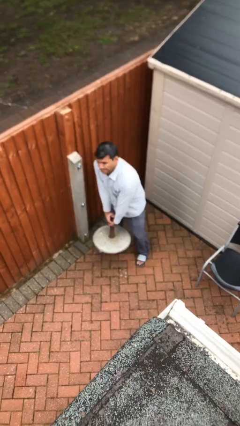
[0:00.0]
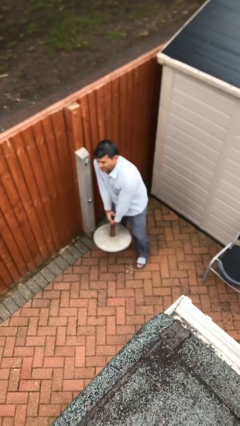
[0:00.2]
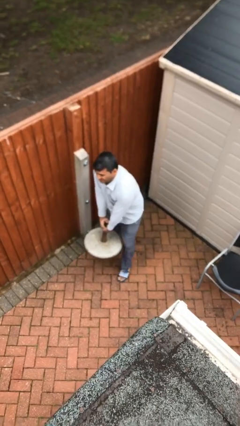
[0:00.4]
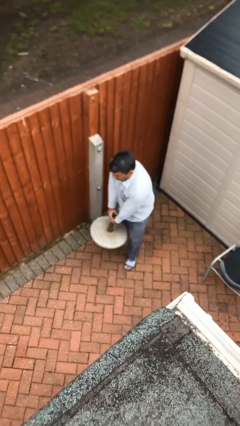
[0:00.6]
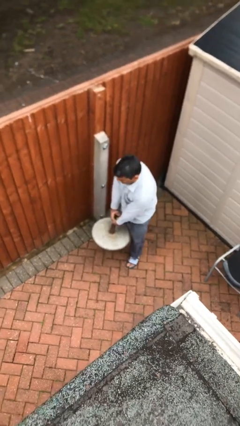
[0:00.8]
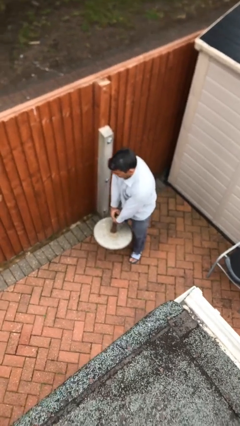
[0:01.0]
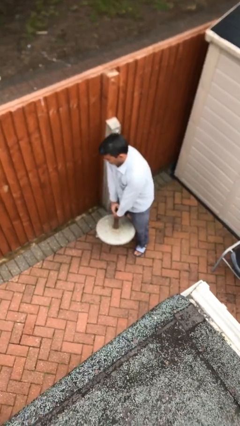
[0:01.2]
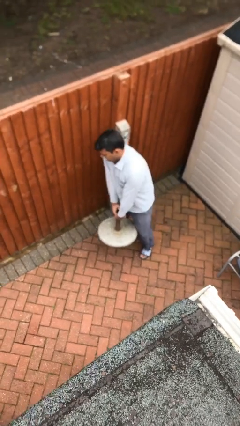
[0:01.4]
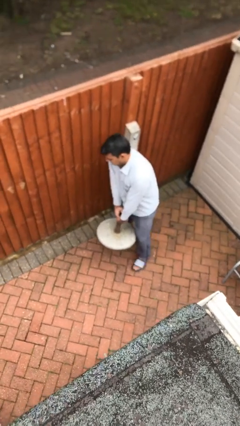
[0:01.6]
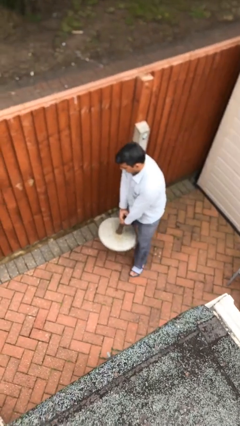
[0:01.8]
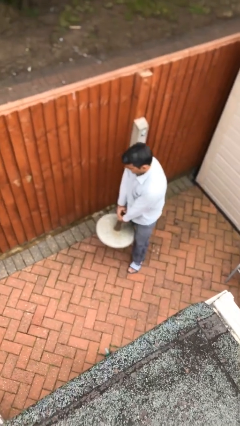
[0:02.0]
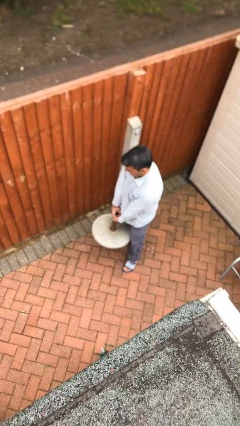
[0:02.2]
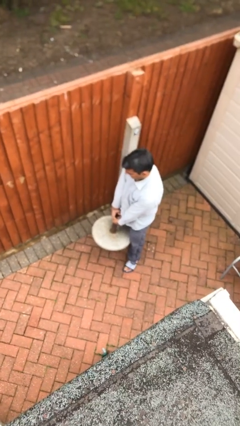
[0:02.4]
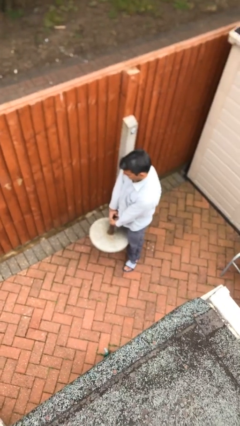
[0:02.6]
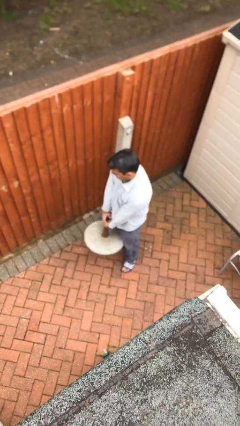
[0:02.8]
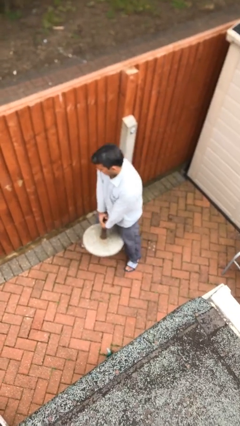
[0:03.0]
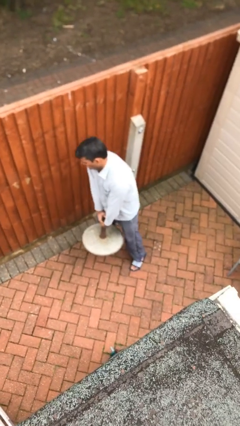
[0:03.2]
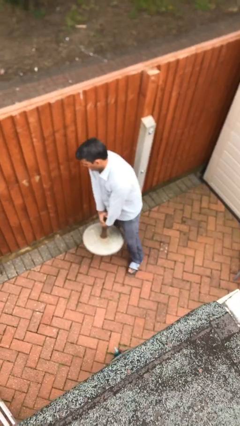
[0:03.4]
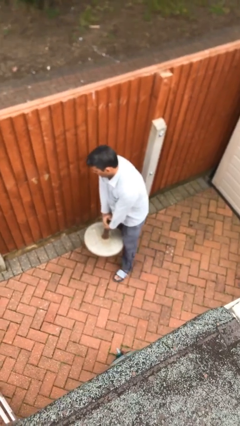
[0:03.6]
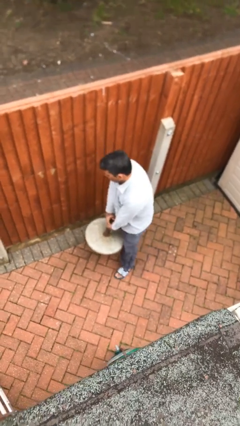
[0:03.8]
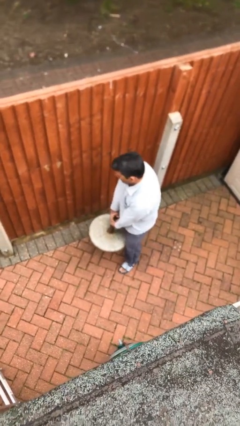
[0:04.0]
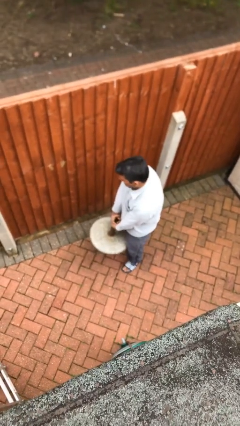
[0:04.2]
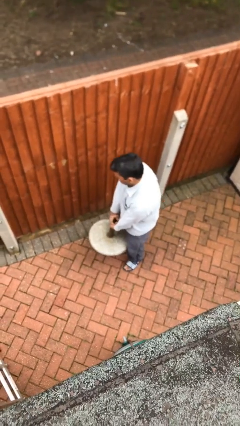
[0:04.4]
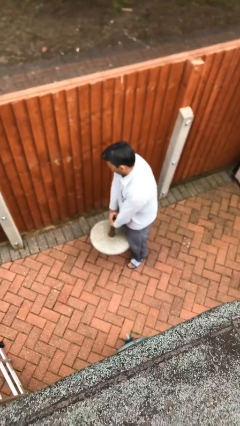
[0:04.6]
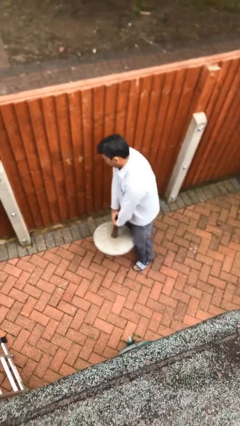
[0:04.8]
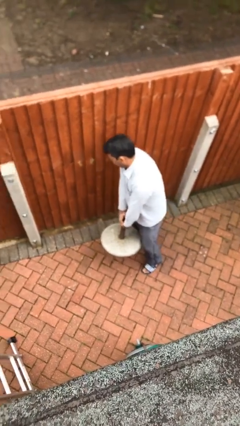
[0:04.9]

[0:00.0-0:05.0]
person carries heavy object

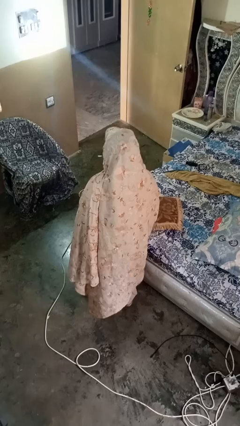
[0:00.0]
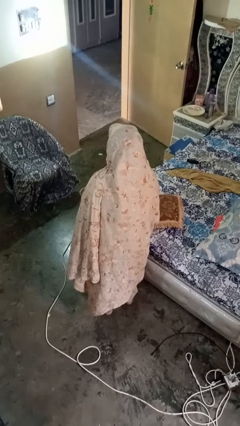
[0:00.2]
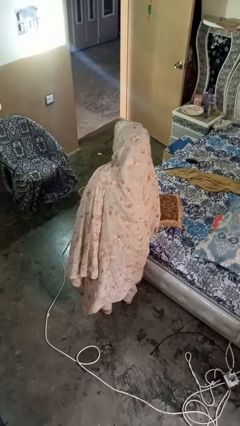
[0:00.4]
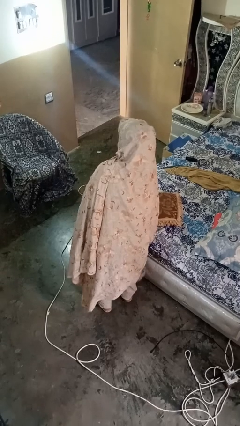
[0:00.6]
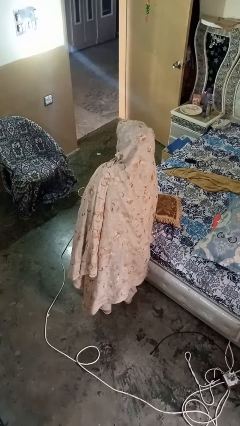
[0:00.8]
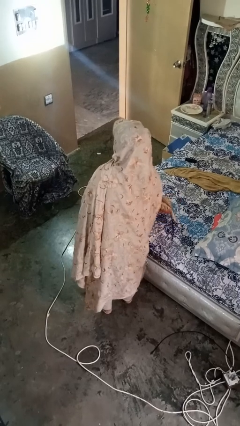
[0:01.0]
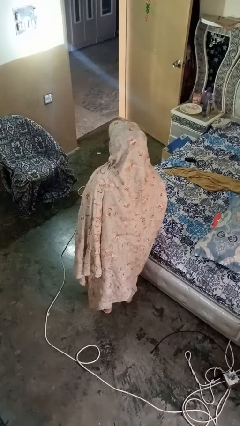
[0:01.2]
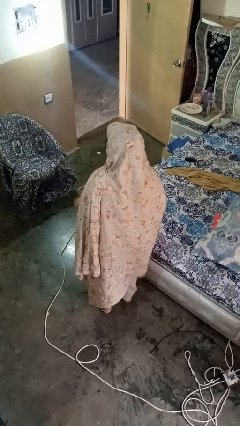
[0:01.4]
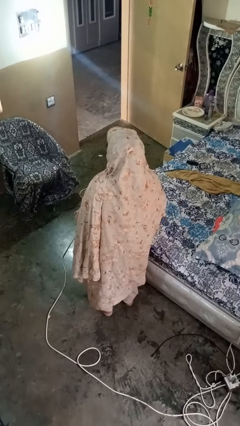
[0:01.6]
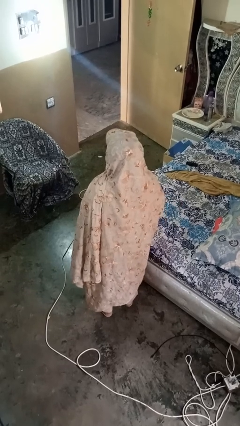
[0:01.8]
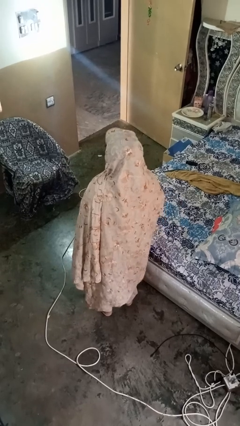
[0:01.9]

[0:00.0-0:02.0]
person picks up object from bed

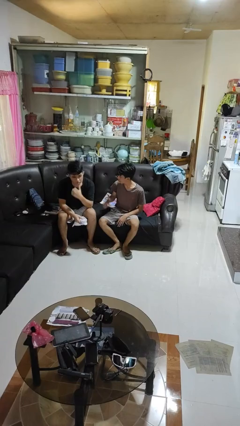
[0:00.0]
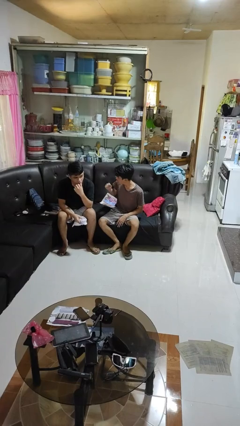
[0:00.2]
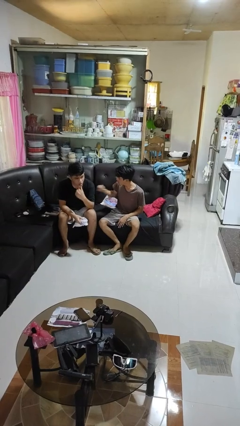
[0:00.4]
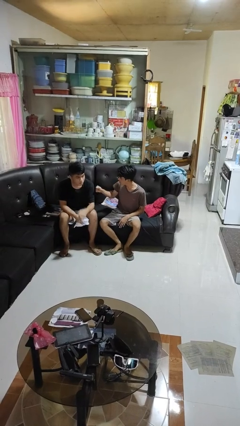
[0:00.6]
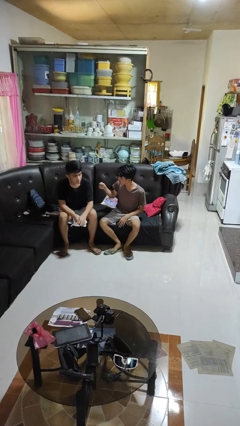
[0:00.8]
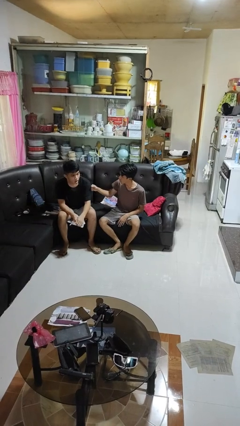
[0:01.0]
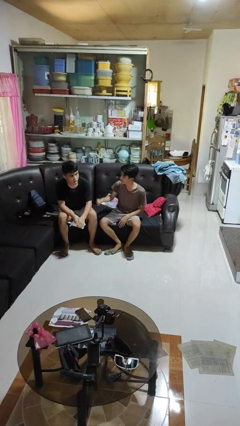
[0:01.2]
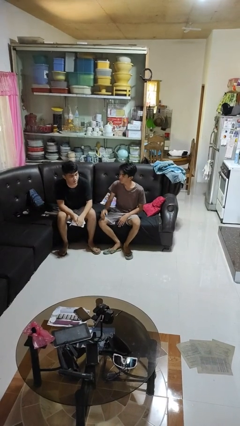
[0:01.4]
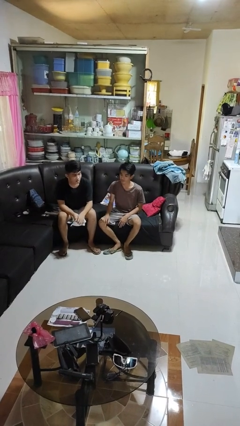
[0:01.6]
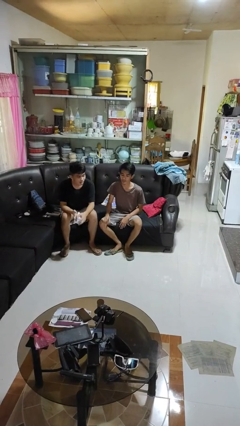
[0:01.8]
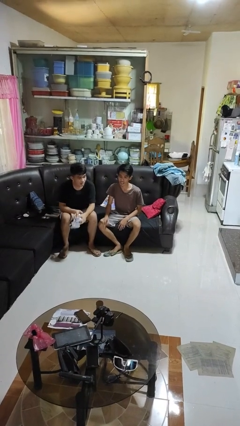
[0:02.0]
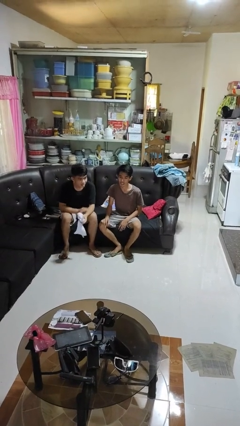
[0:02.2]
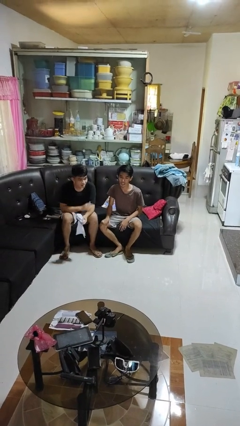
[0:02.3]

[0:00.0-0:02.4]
person pounds shoulders of person

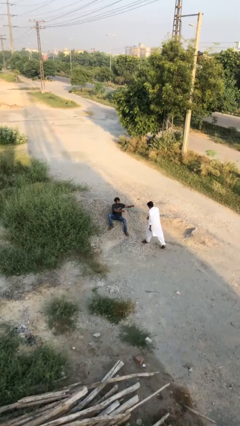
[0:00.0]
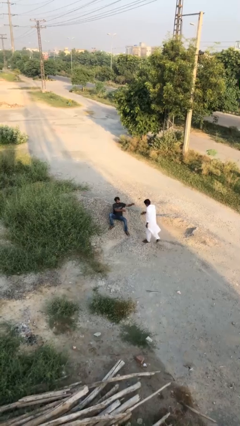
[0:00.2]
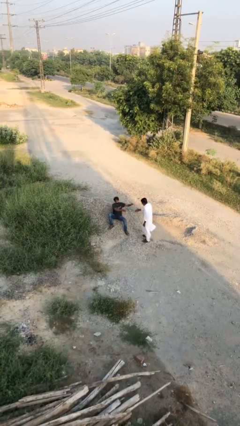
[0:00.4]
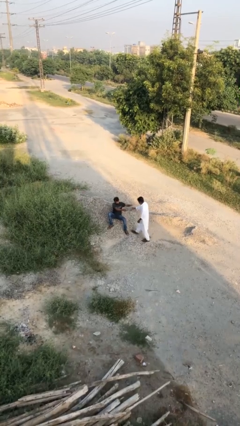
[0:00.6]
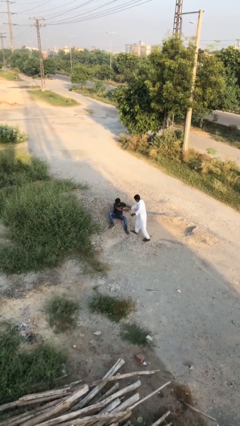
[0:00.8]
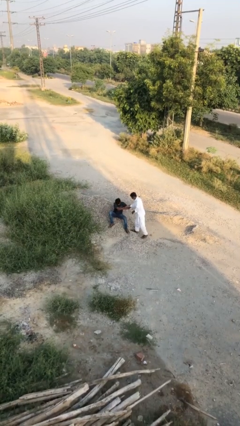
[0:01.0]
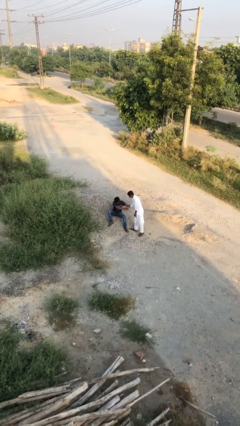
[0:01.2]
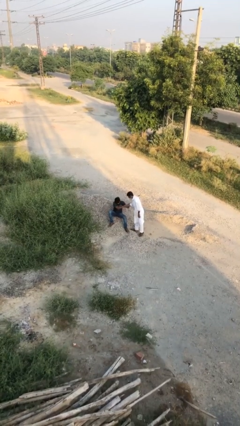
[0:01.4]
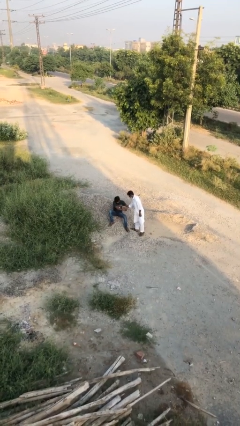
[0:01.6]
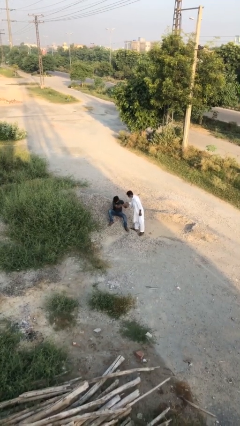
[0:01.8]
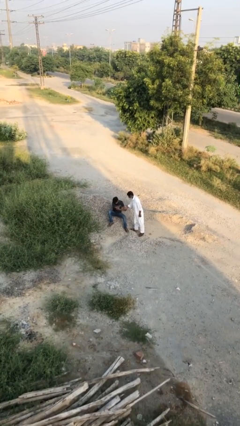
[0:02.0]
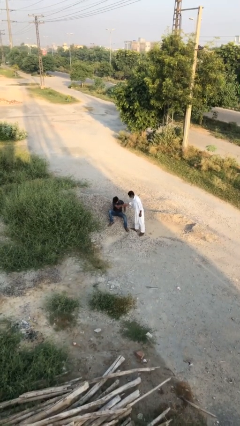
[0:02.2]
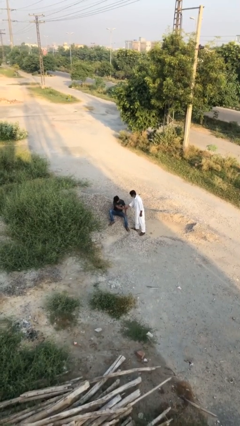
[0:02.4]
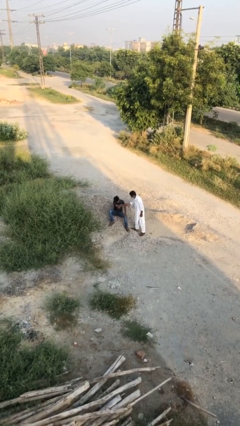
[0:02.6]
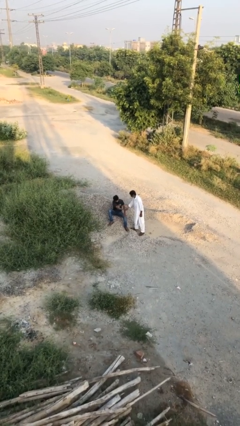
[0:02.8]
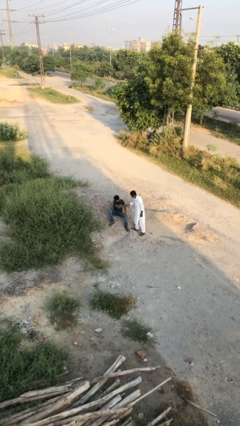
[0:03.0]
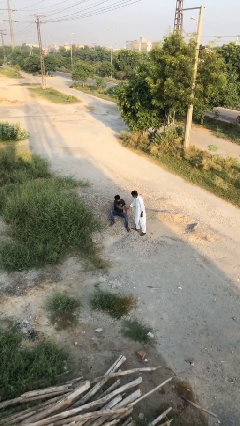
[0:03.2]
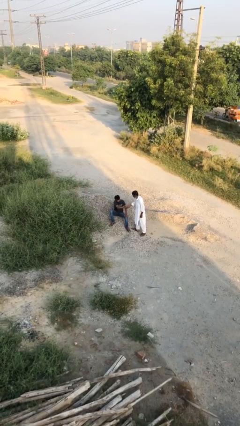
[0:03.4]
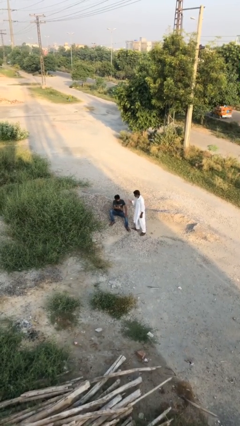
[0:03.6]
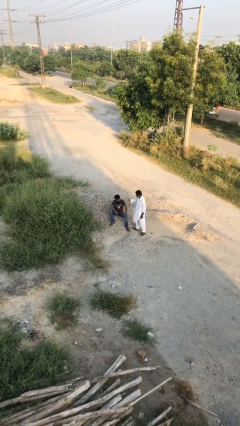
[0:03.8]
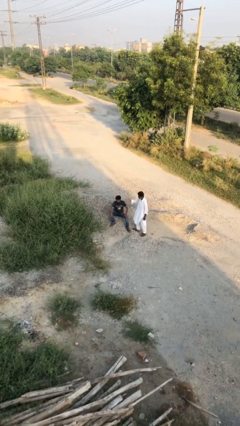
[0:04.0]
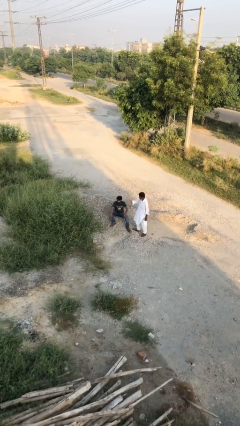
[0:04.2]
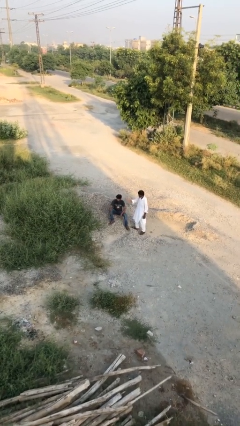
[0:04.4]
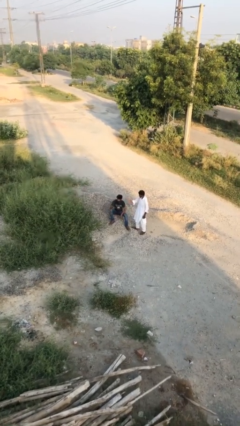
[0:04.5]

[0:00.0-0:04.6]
person shakes hand

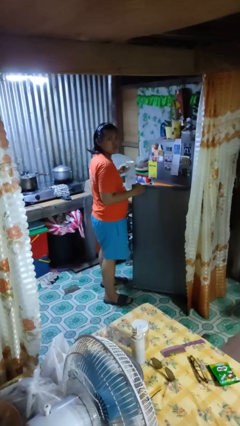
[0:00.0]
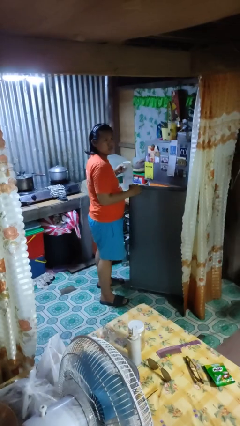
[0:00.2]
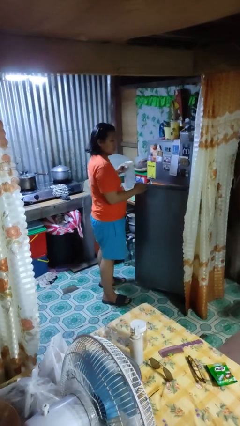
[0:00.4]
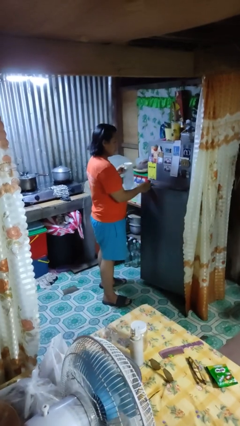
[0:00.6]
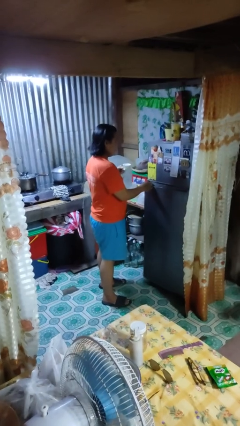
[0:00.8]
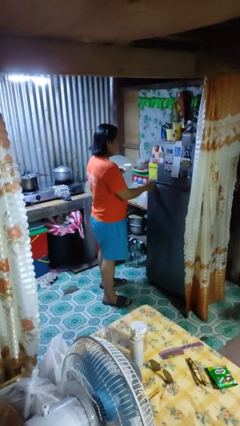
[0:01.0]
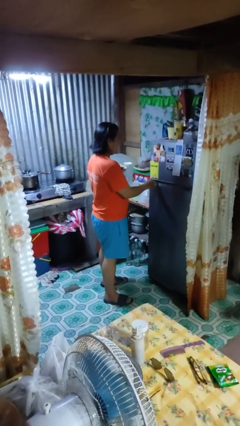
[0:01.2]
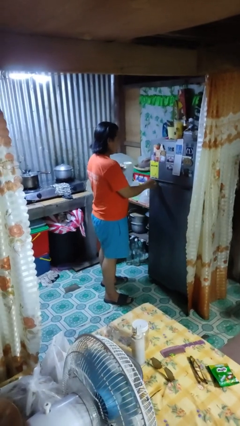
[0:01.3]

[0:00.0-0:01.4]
person closes refrigerator

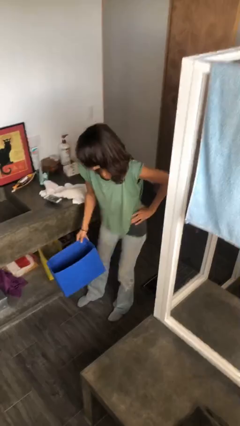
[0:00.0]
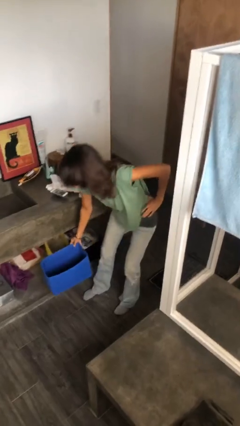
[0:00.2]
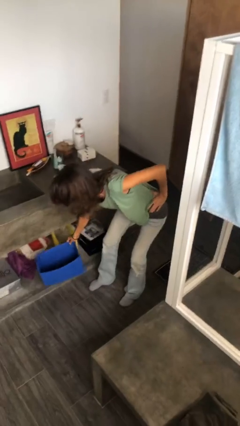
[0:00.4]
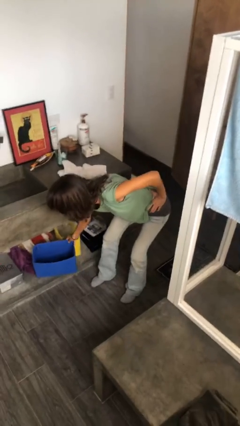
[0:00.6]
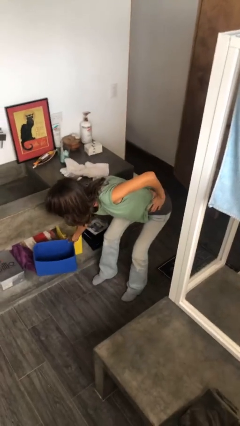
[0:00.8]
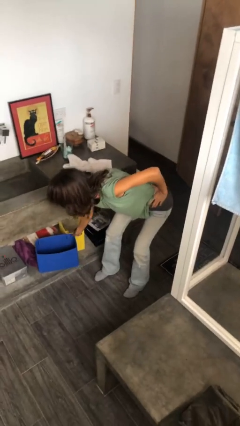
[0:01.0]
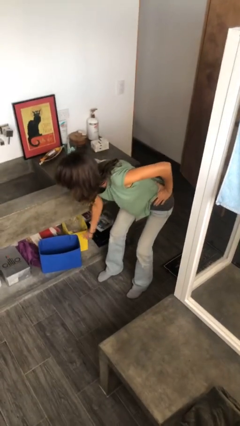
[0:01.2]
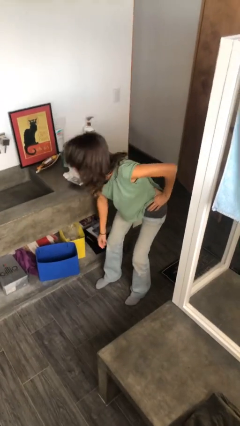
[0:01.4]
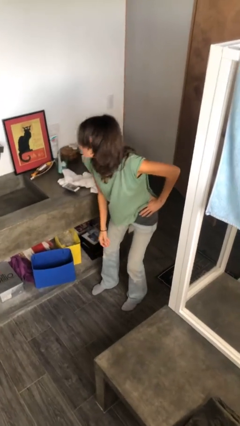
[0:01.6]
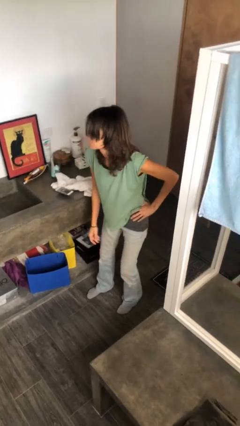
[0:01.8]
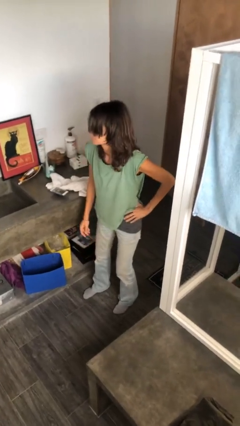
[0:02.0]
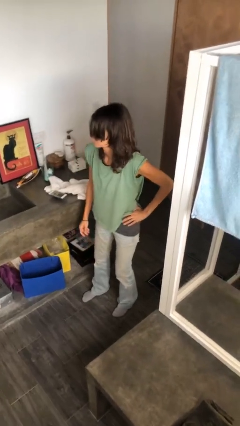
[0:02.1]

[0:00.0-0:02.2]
person puts down object into cabinet
